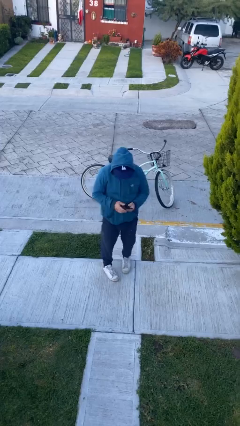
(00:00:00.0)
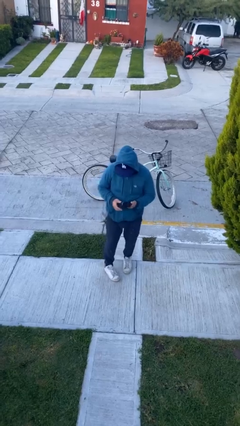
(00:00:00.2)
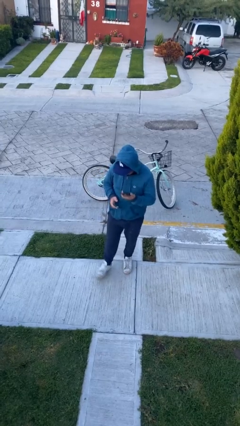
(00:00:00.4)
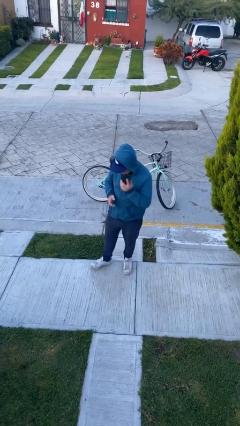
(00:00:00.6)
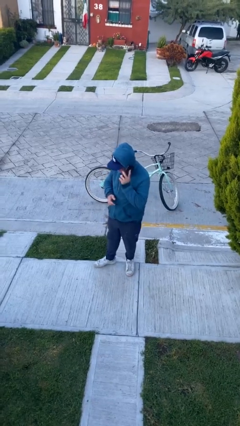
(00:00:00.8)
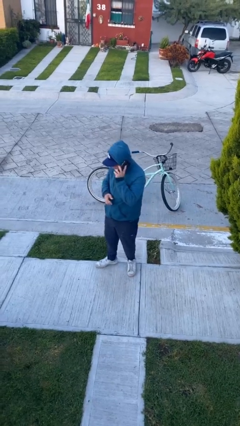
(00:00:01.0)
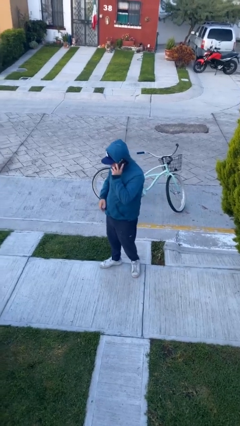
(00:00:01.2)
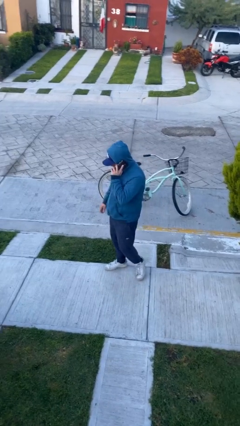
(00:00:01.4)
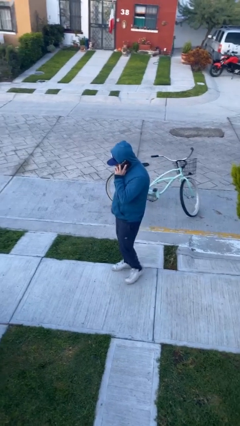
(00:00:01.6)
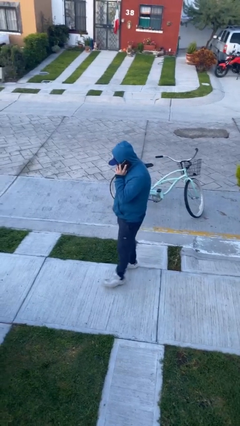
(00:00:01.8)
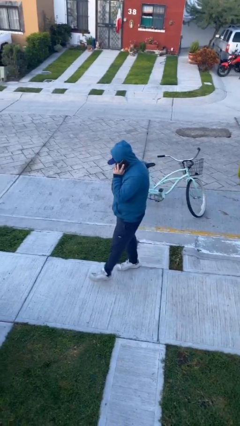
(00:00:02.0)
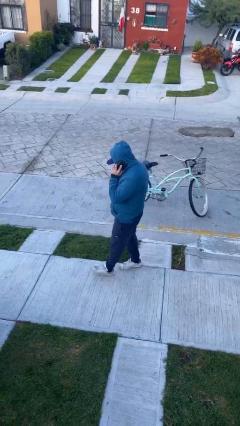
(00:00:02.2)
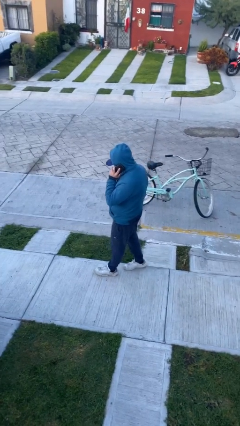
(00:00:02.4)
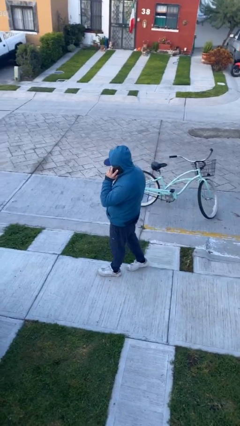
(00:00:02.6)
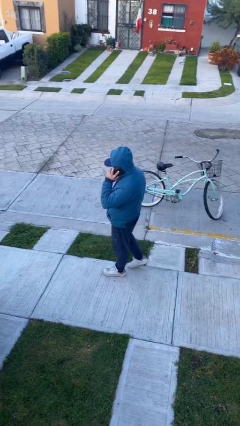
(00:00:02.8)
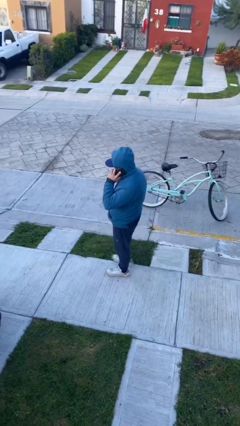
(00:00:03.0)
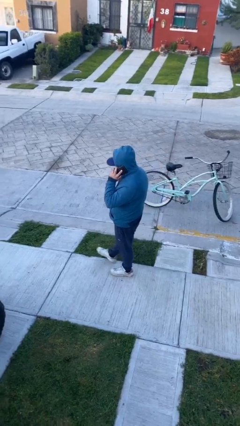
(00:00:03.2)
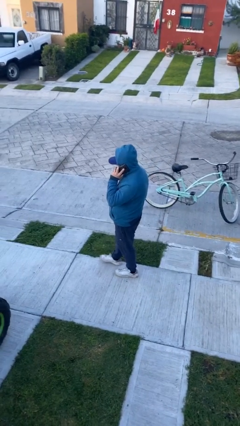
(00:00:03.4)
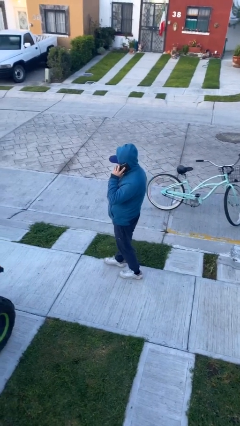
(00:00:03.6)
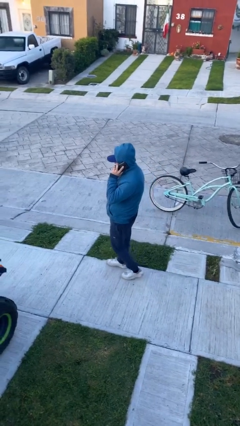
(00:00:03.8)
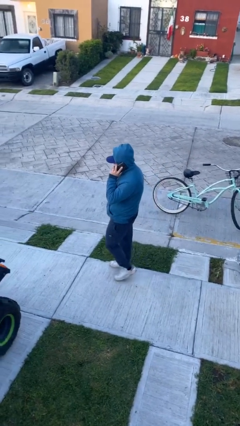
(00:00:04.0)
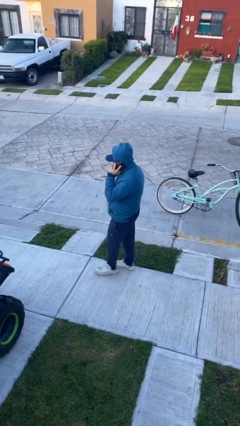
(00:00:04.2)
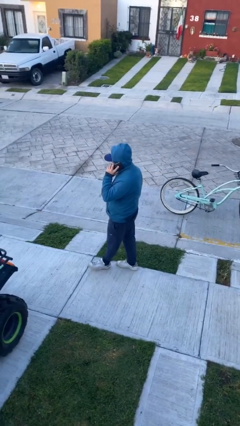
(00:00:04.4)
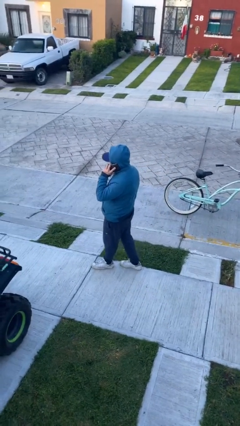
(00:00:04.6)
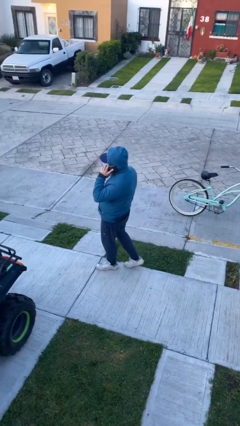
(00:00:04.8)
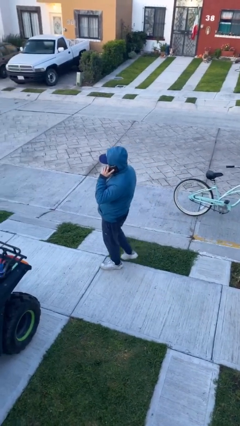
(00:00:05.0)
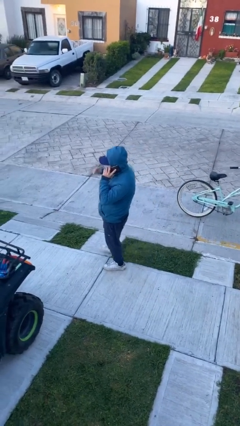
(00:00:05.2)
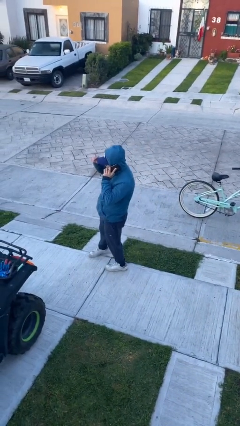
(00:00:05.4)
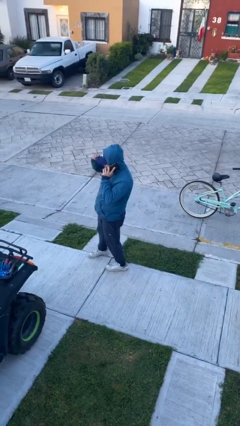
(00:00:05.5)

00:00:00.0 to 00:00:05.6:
person talks on phone

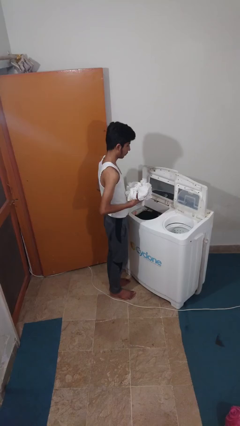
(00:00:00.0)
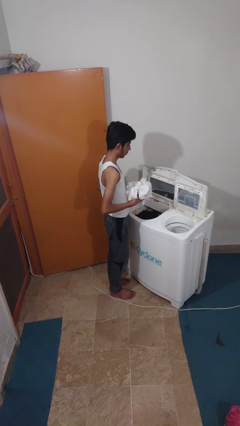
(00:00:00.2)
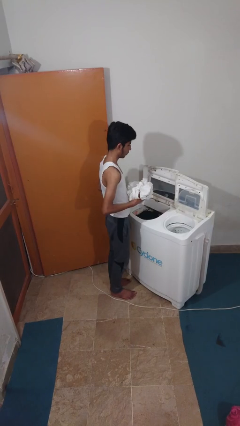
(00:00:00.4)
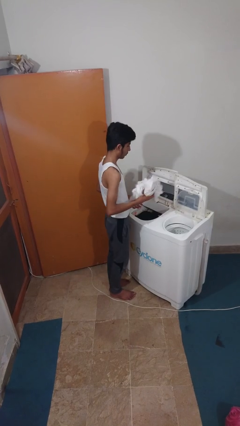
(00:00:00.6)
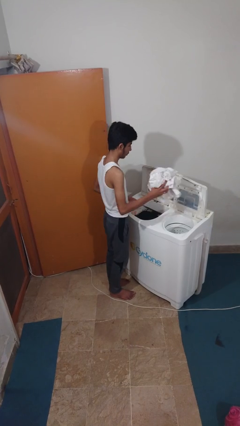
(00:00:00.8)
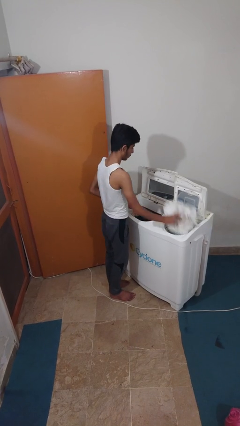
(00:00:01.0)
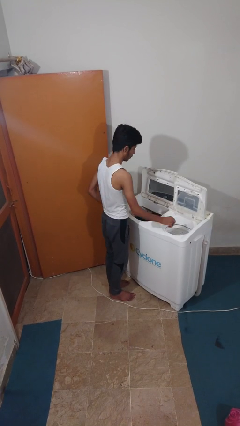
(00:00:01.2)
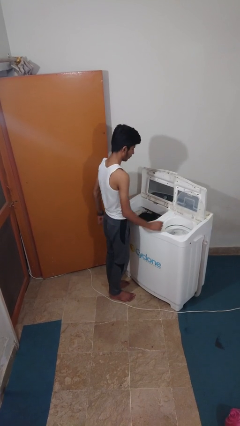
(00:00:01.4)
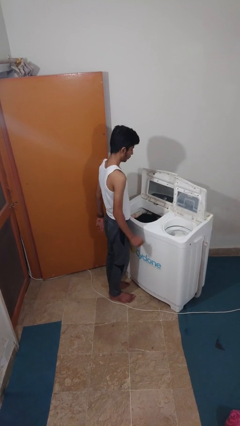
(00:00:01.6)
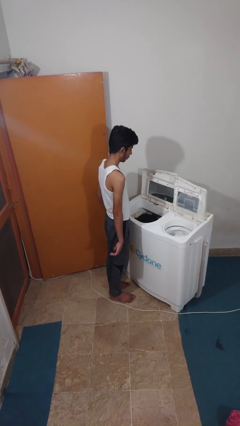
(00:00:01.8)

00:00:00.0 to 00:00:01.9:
person loads dryer

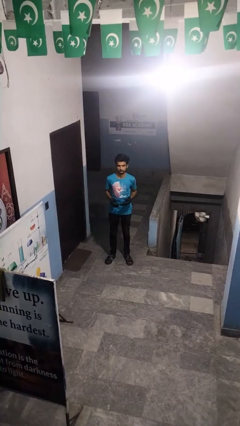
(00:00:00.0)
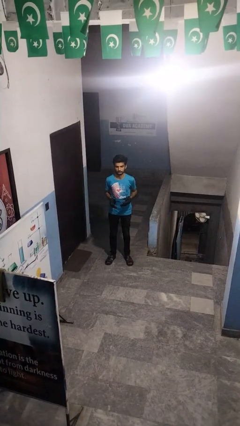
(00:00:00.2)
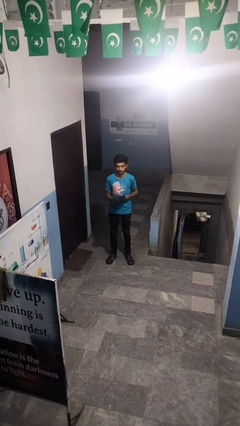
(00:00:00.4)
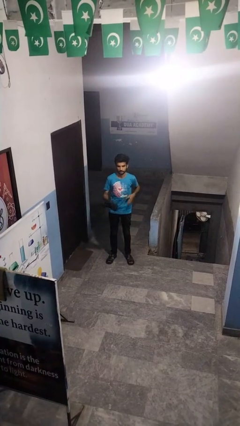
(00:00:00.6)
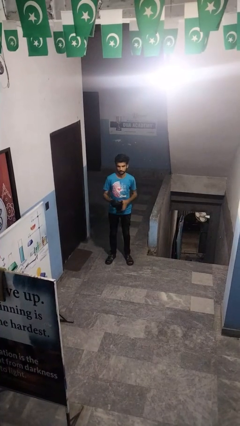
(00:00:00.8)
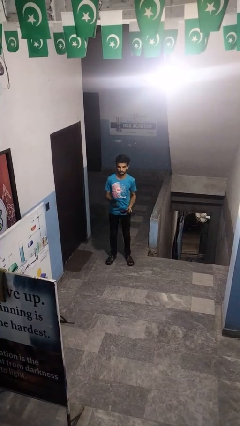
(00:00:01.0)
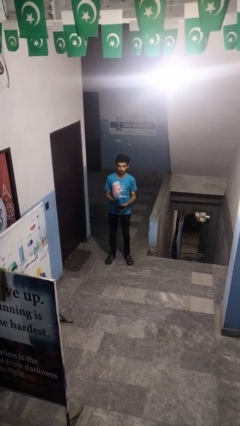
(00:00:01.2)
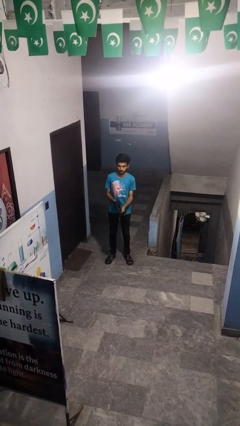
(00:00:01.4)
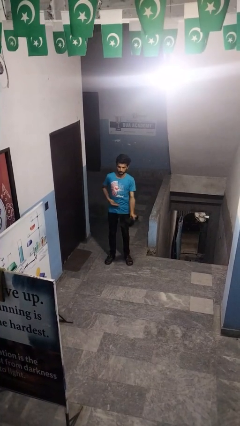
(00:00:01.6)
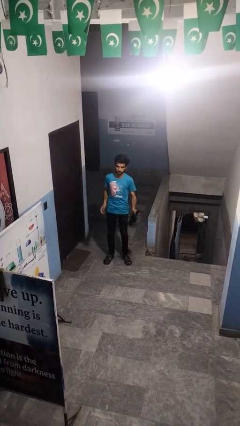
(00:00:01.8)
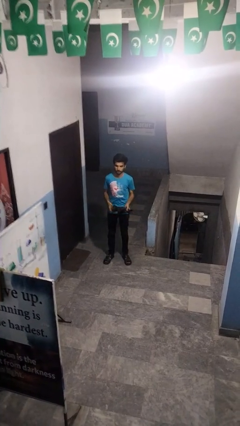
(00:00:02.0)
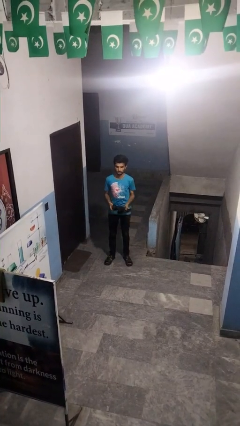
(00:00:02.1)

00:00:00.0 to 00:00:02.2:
person takes off gloves

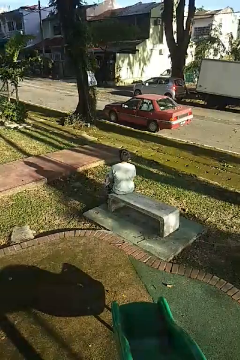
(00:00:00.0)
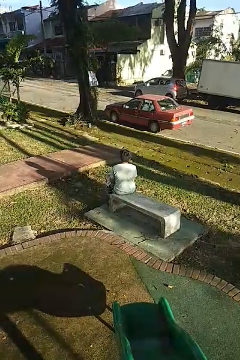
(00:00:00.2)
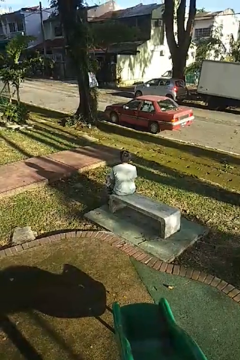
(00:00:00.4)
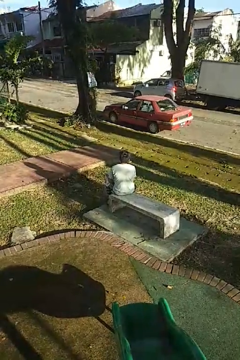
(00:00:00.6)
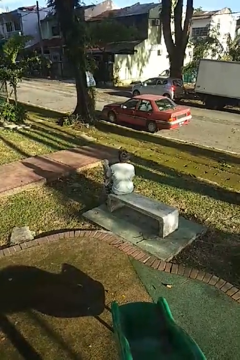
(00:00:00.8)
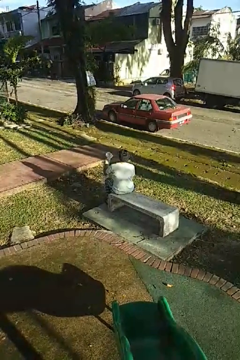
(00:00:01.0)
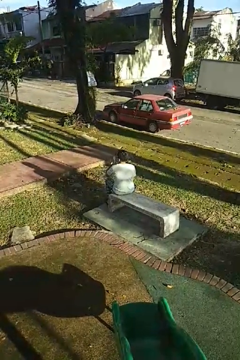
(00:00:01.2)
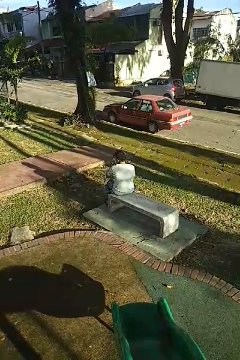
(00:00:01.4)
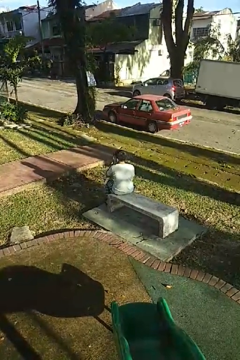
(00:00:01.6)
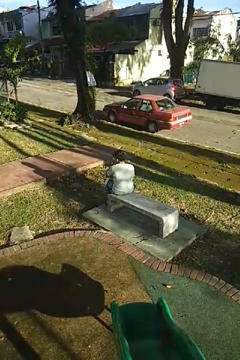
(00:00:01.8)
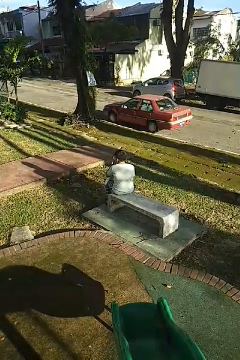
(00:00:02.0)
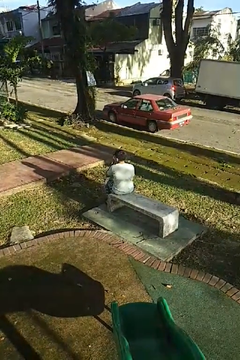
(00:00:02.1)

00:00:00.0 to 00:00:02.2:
person blows nose

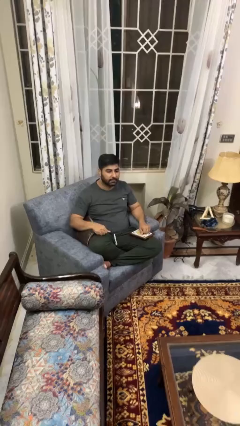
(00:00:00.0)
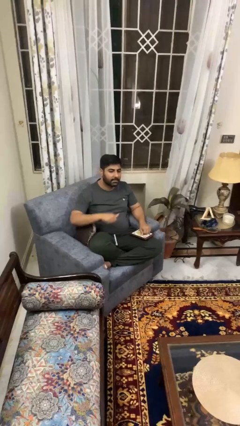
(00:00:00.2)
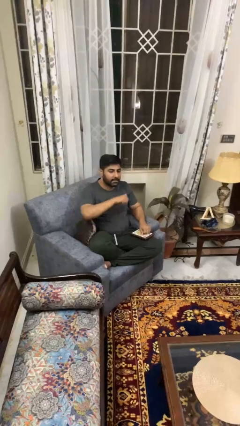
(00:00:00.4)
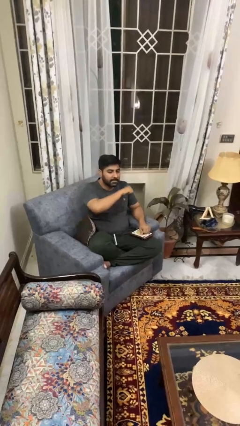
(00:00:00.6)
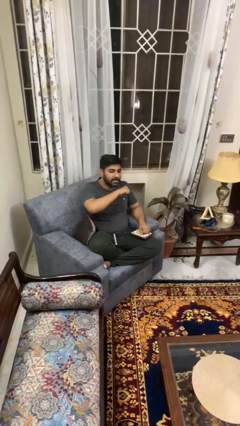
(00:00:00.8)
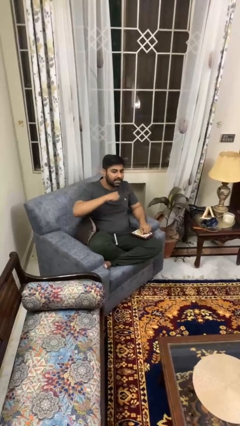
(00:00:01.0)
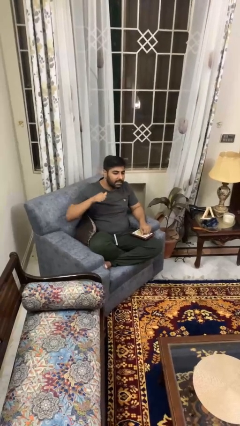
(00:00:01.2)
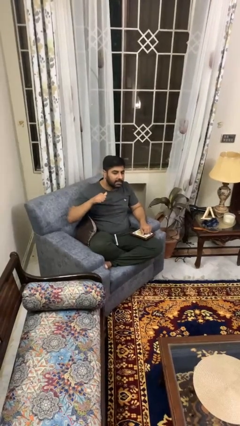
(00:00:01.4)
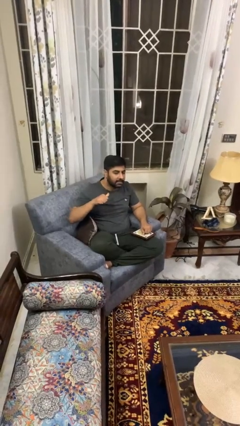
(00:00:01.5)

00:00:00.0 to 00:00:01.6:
person gestures cut

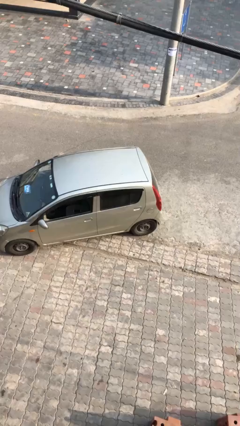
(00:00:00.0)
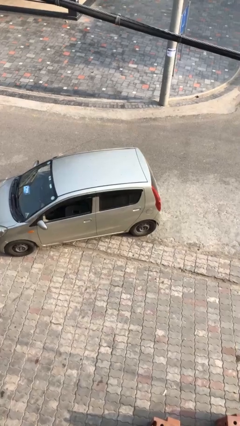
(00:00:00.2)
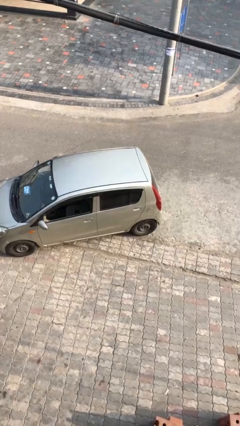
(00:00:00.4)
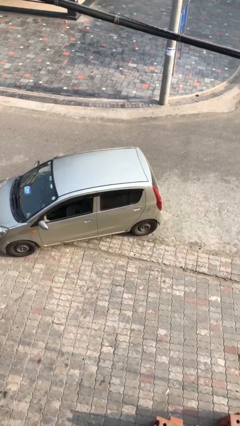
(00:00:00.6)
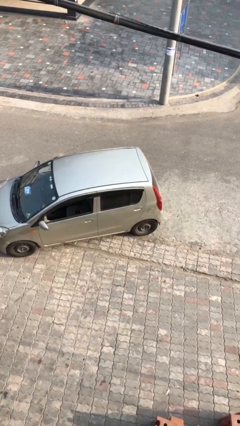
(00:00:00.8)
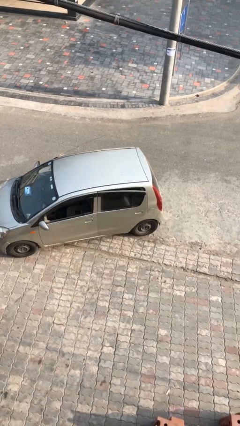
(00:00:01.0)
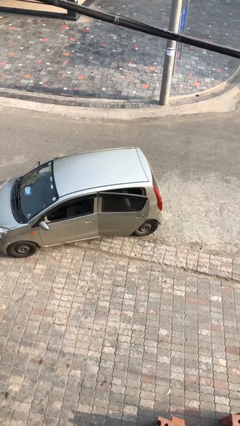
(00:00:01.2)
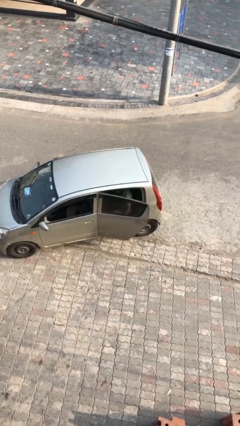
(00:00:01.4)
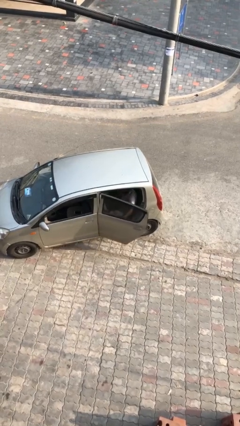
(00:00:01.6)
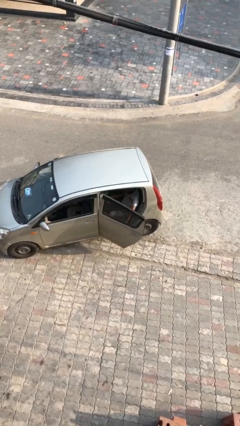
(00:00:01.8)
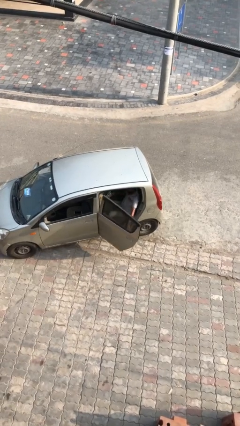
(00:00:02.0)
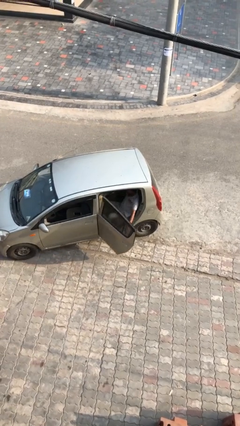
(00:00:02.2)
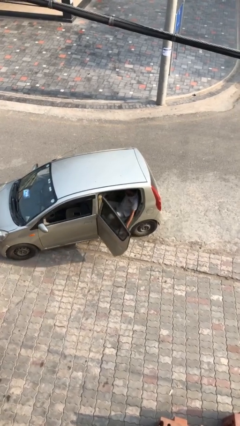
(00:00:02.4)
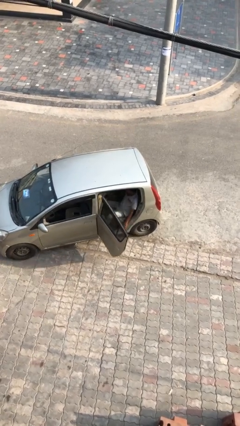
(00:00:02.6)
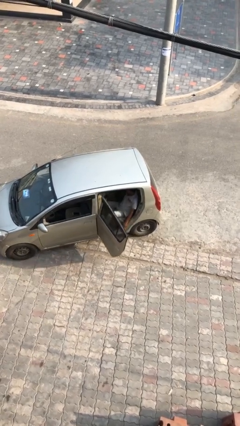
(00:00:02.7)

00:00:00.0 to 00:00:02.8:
person opens car door

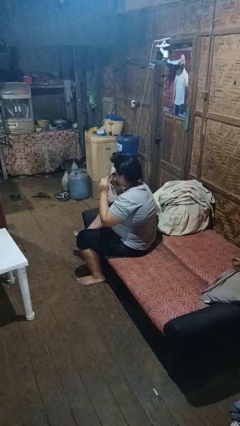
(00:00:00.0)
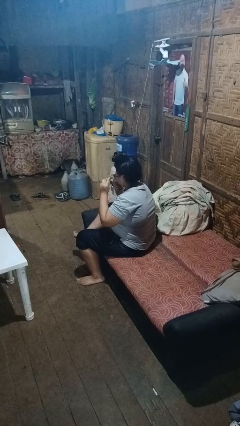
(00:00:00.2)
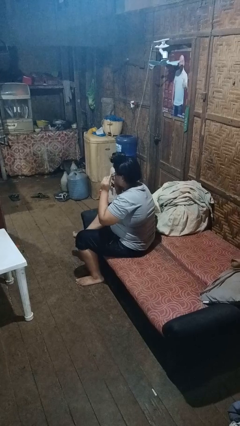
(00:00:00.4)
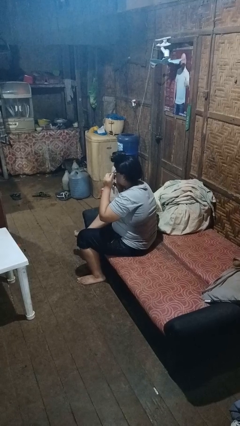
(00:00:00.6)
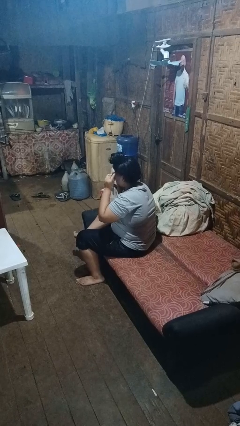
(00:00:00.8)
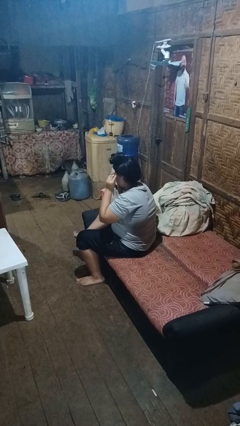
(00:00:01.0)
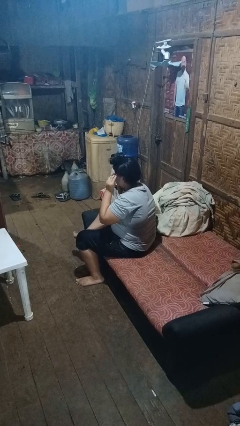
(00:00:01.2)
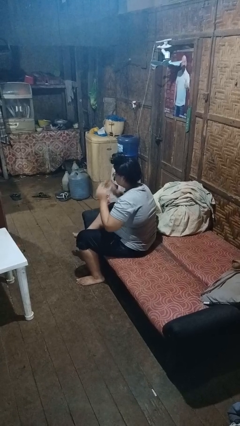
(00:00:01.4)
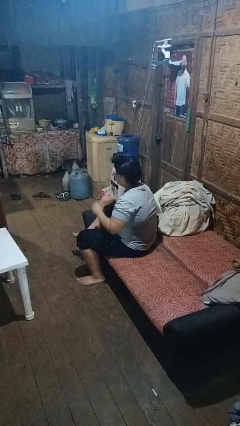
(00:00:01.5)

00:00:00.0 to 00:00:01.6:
person puts on glasses
